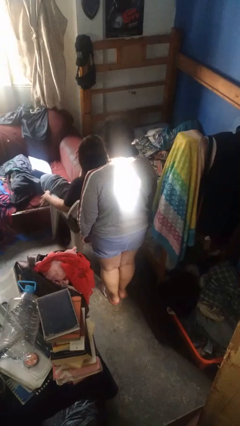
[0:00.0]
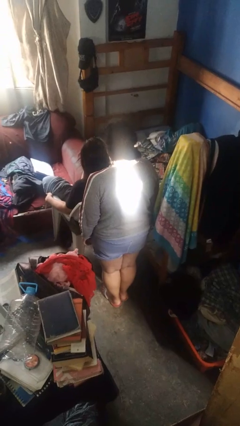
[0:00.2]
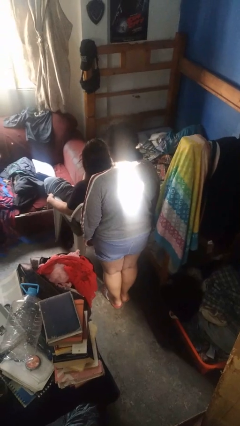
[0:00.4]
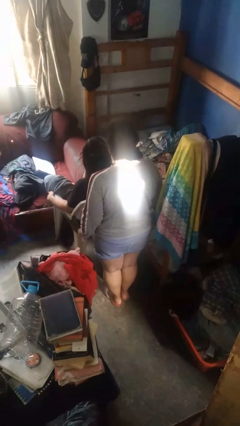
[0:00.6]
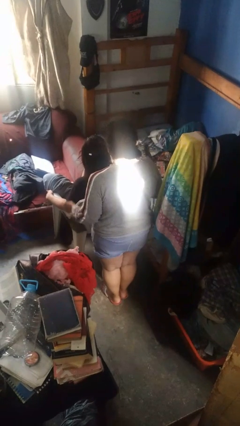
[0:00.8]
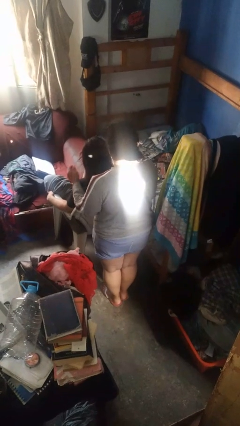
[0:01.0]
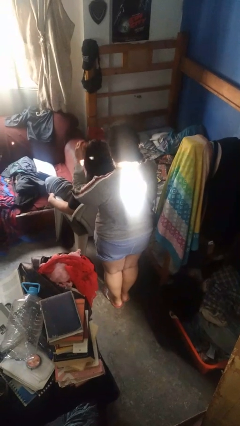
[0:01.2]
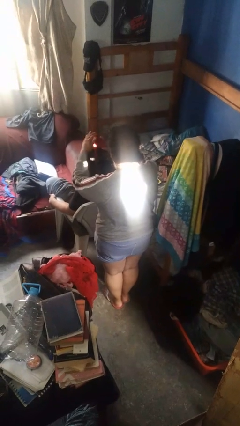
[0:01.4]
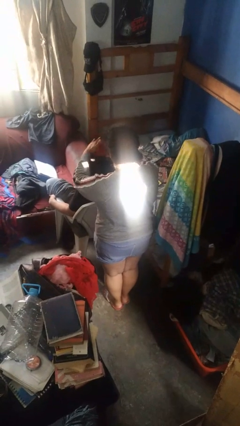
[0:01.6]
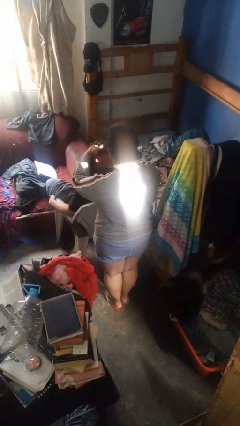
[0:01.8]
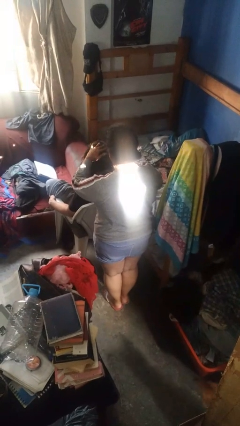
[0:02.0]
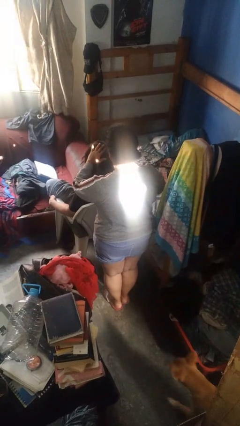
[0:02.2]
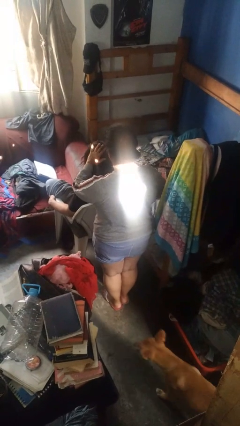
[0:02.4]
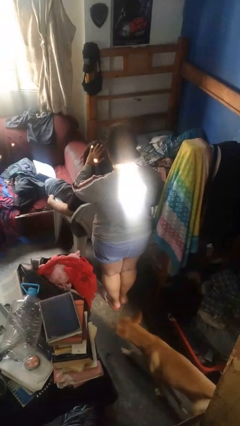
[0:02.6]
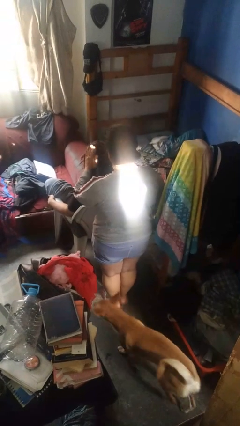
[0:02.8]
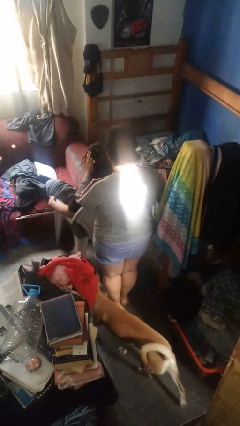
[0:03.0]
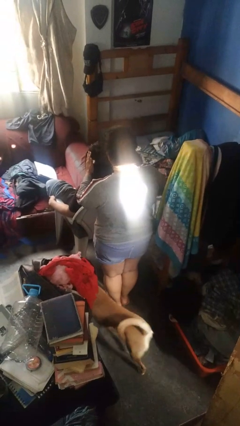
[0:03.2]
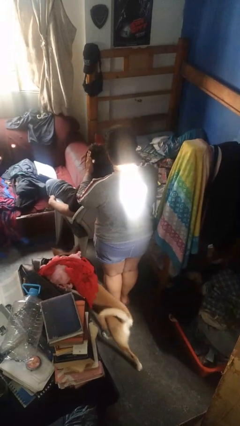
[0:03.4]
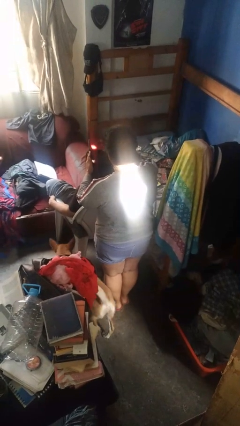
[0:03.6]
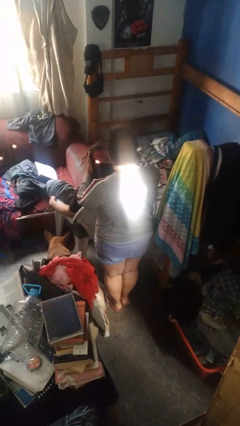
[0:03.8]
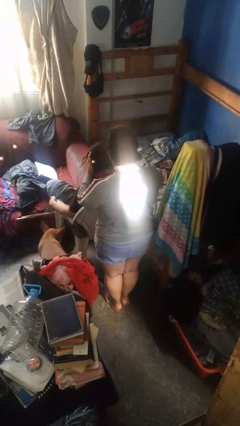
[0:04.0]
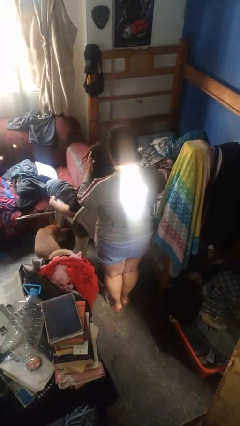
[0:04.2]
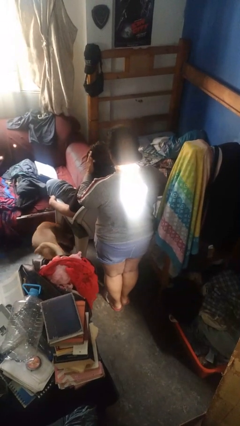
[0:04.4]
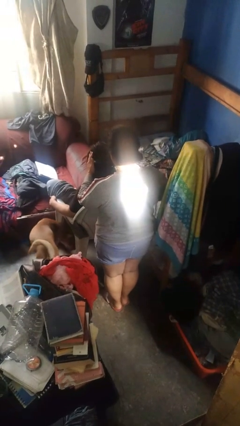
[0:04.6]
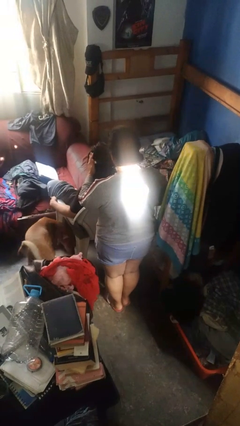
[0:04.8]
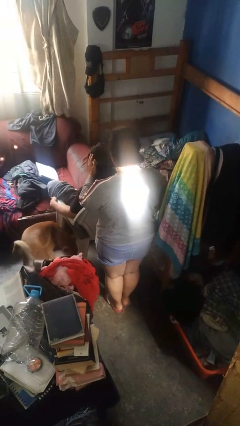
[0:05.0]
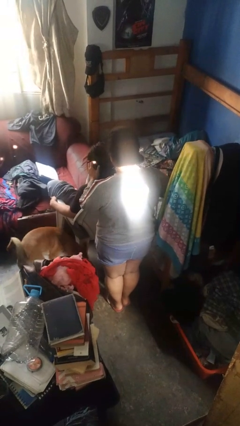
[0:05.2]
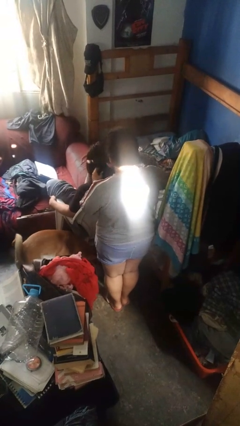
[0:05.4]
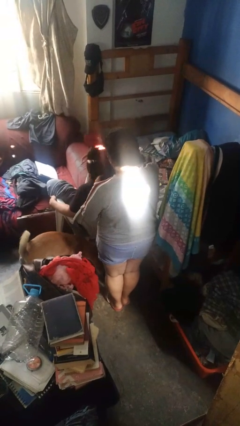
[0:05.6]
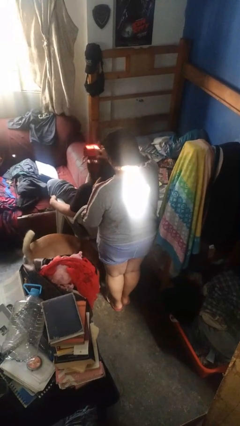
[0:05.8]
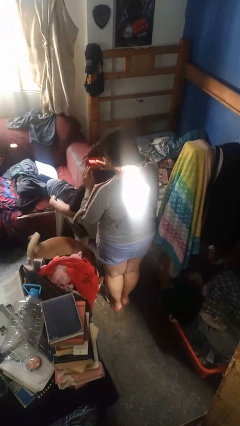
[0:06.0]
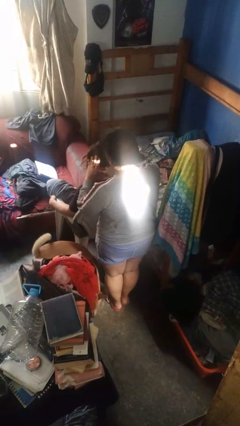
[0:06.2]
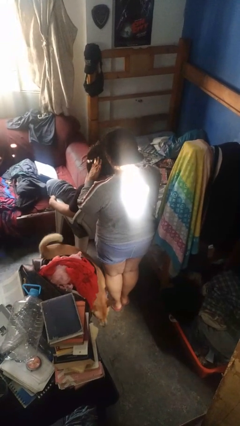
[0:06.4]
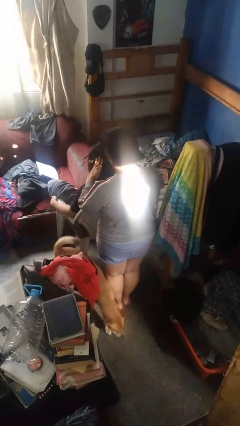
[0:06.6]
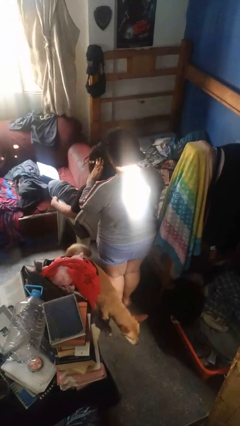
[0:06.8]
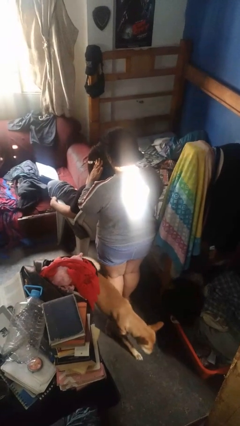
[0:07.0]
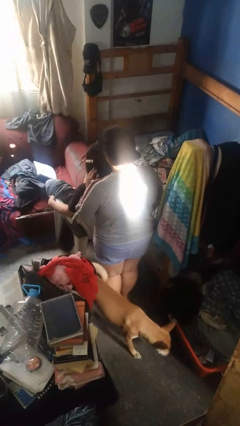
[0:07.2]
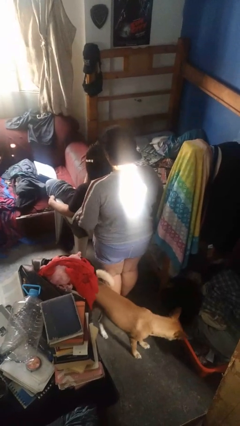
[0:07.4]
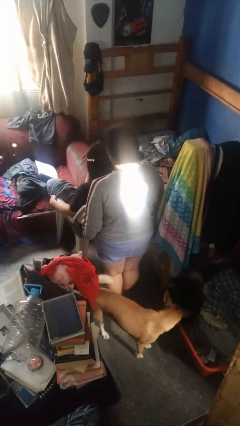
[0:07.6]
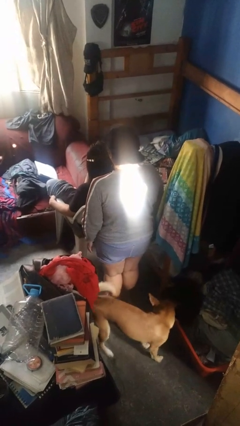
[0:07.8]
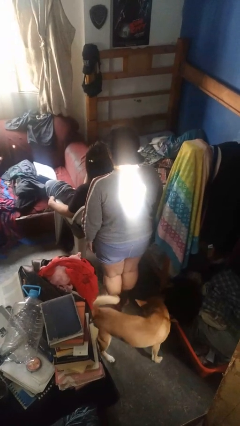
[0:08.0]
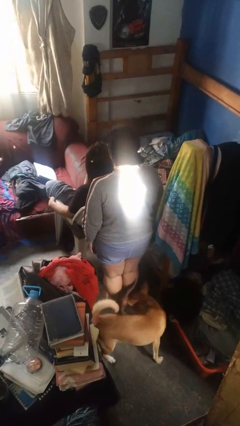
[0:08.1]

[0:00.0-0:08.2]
person brushes hair of person

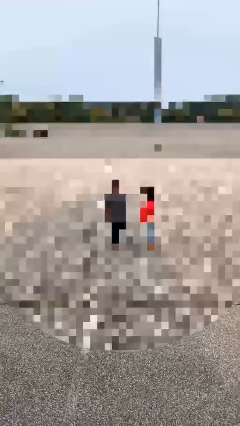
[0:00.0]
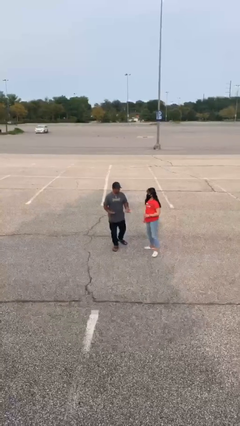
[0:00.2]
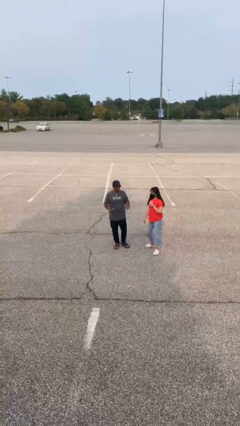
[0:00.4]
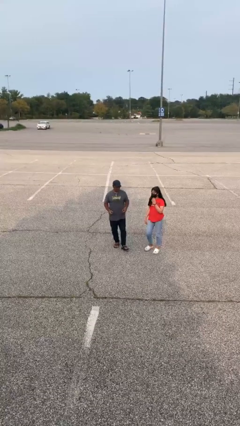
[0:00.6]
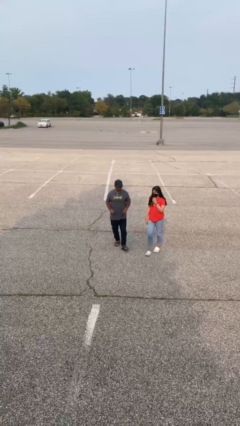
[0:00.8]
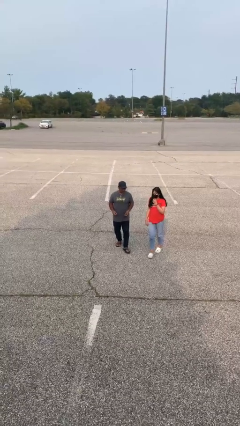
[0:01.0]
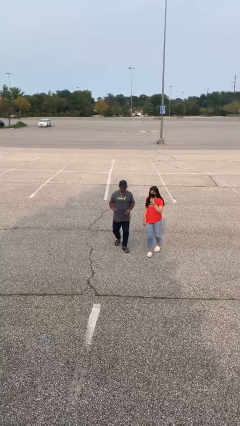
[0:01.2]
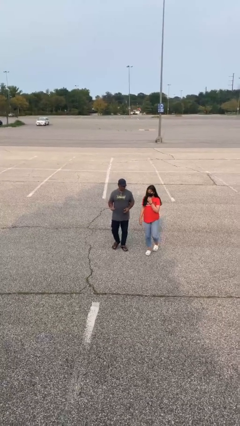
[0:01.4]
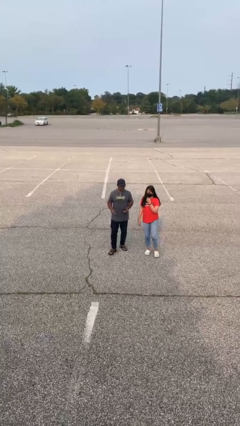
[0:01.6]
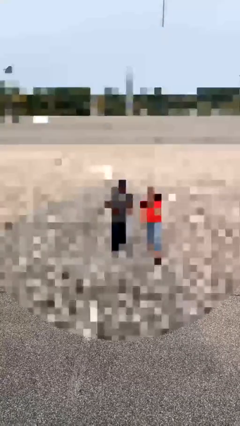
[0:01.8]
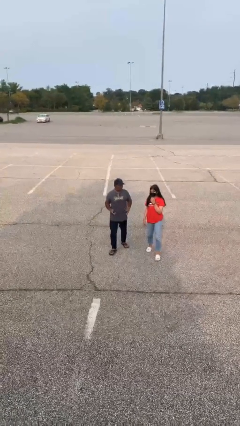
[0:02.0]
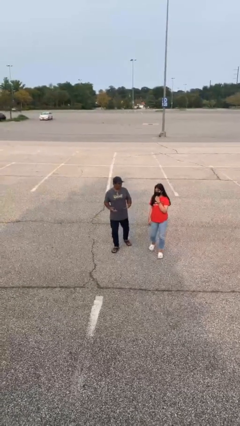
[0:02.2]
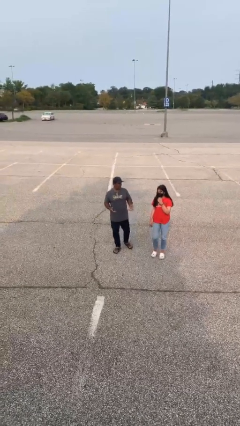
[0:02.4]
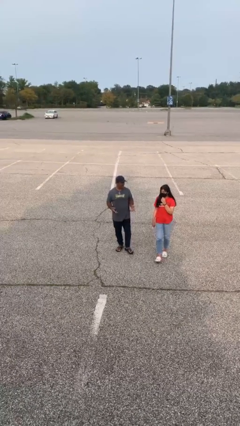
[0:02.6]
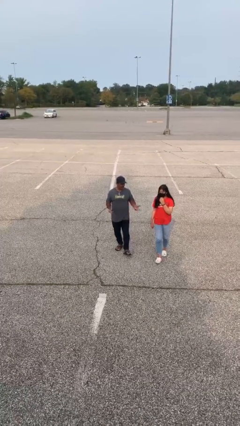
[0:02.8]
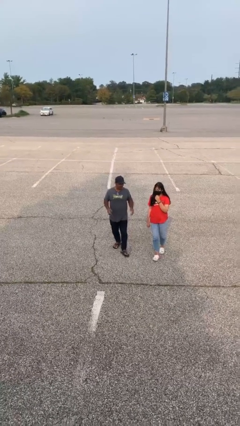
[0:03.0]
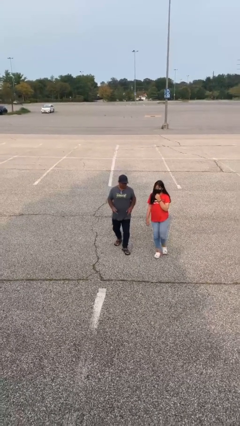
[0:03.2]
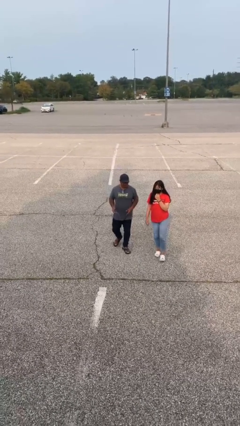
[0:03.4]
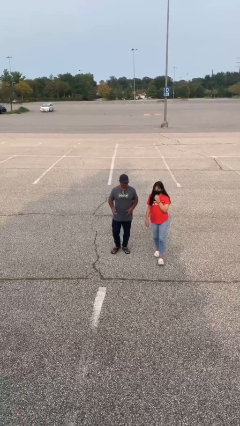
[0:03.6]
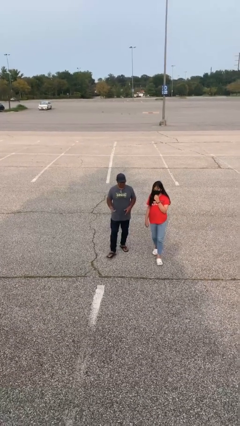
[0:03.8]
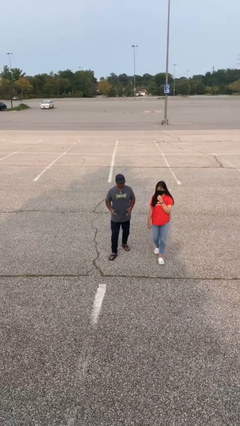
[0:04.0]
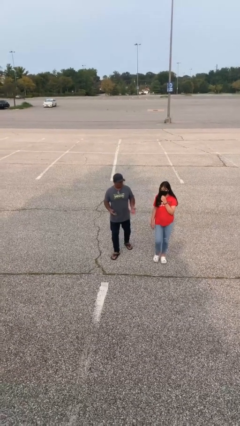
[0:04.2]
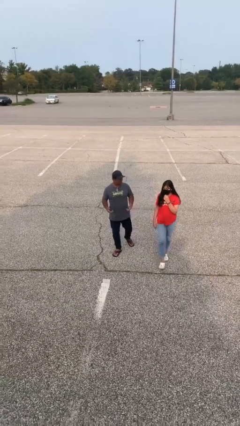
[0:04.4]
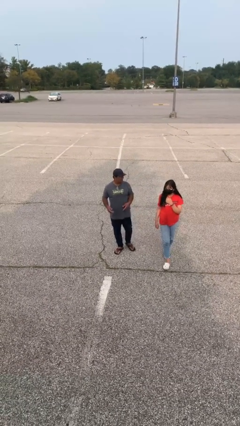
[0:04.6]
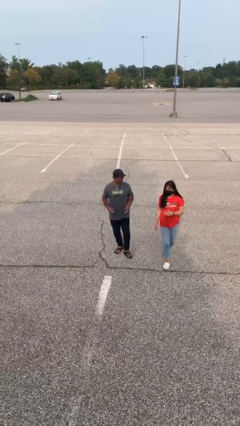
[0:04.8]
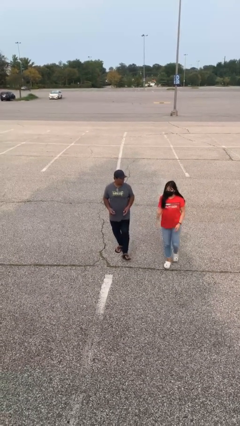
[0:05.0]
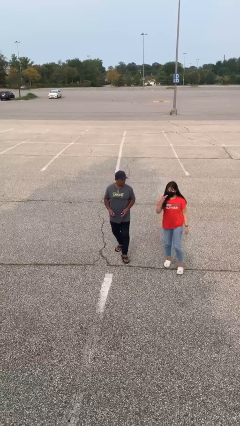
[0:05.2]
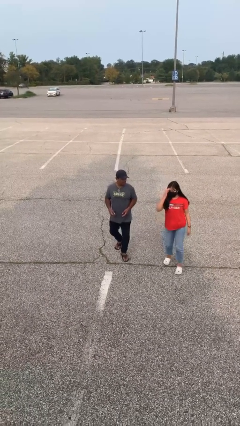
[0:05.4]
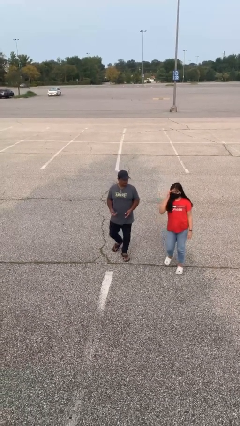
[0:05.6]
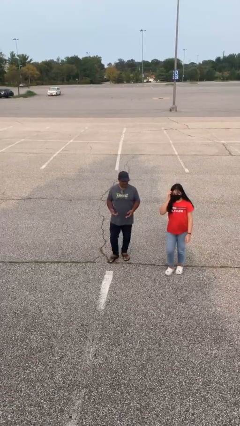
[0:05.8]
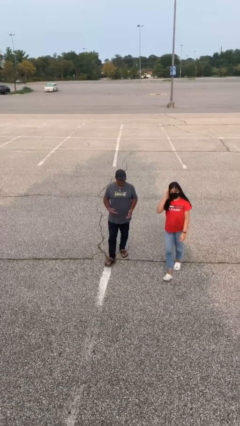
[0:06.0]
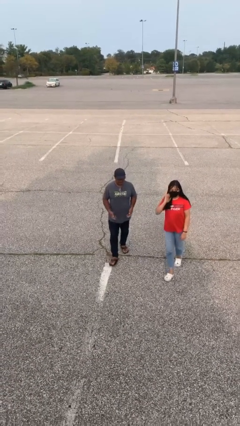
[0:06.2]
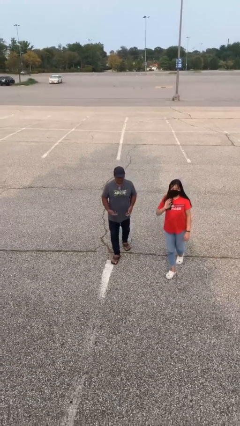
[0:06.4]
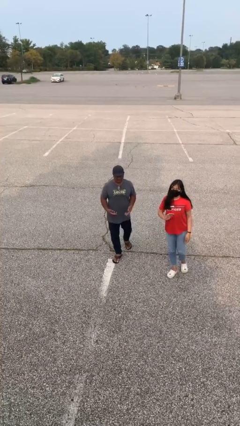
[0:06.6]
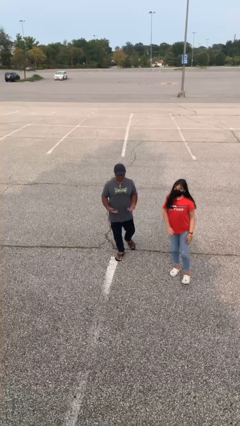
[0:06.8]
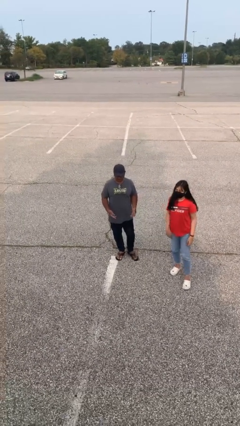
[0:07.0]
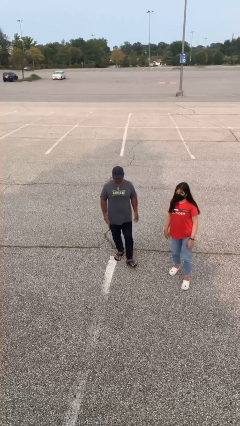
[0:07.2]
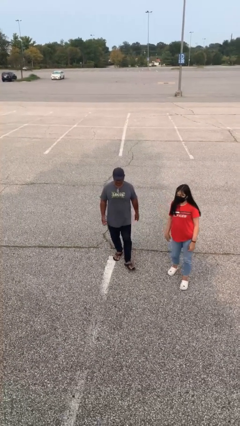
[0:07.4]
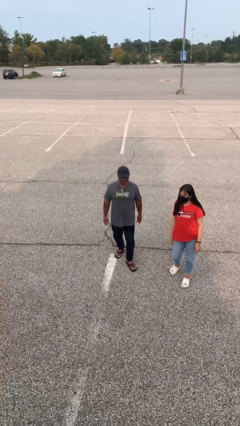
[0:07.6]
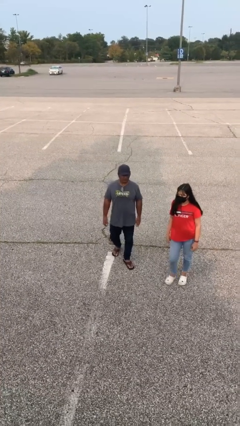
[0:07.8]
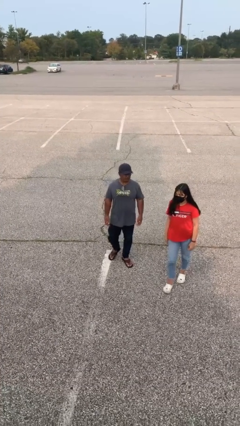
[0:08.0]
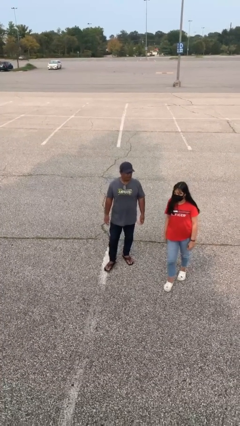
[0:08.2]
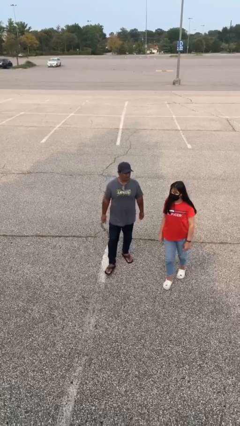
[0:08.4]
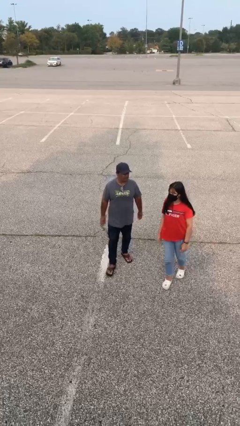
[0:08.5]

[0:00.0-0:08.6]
person talks to person

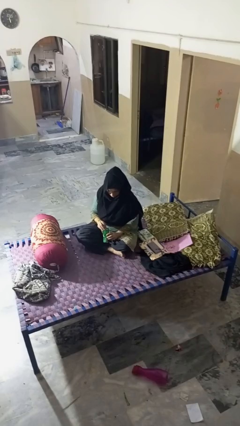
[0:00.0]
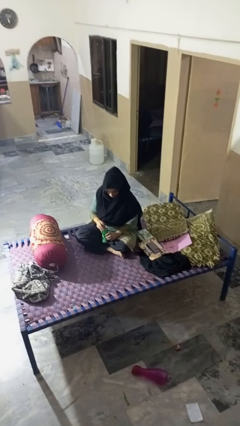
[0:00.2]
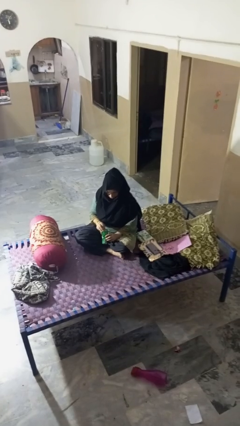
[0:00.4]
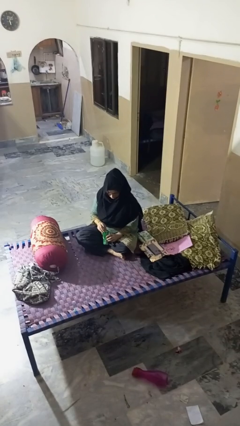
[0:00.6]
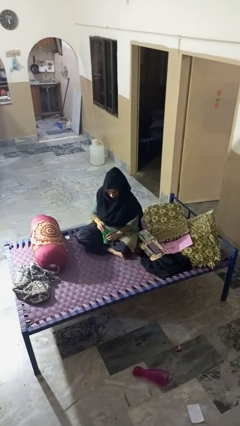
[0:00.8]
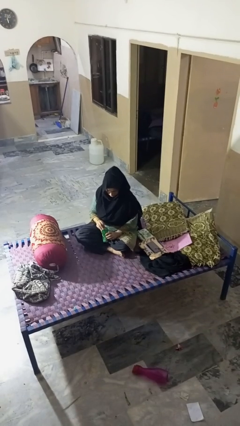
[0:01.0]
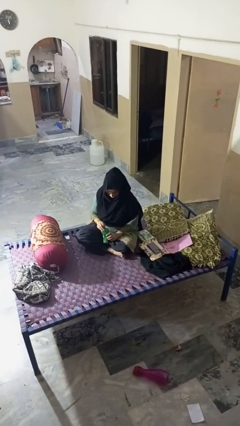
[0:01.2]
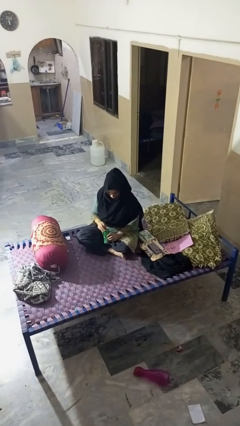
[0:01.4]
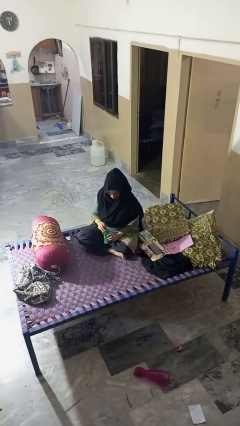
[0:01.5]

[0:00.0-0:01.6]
person opens can with can opener
